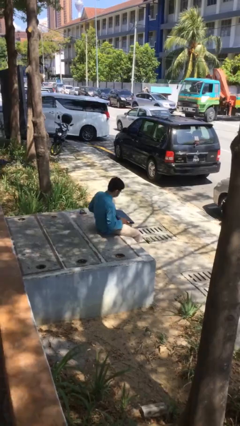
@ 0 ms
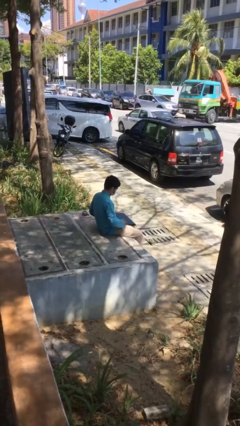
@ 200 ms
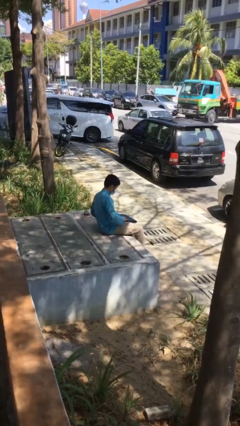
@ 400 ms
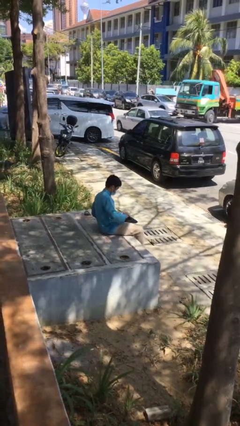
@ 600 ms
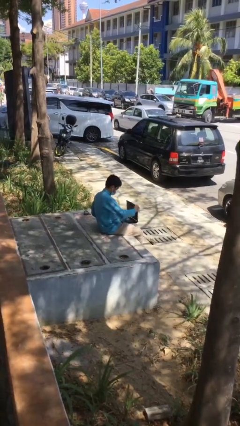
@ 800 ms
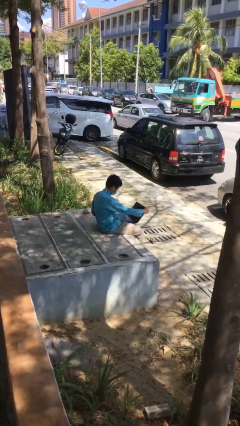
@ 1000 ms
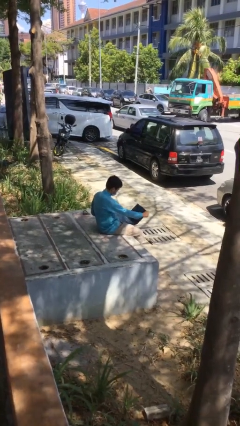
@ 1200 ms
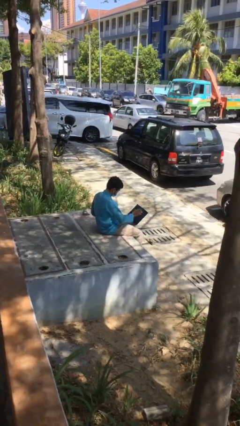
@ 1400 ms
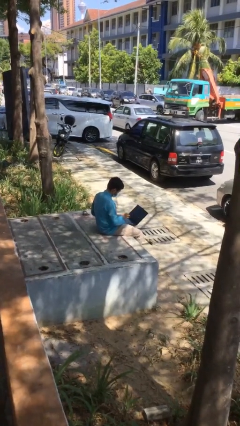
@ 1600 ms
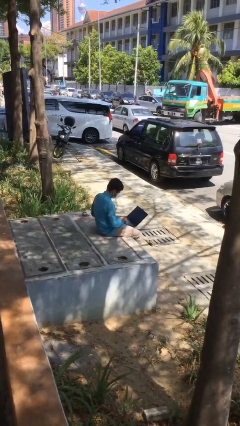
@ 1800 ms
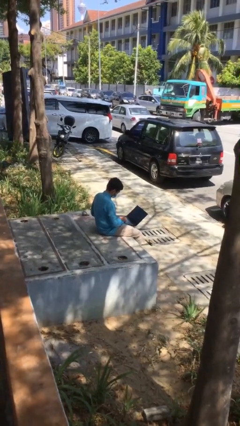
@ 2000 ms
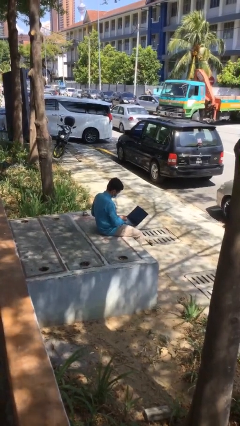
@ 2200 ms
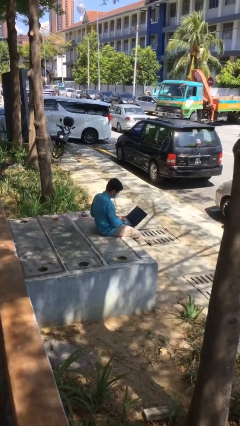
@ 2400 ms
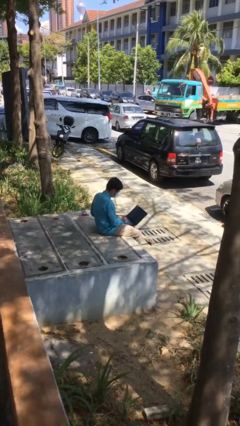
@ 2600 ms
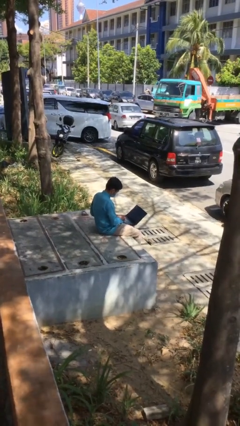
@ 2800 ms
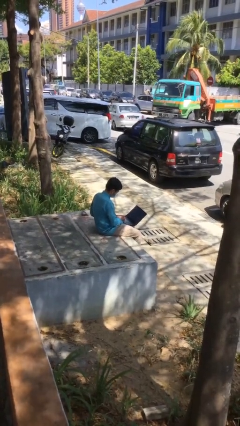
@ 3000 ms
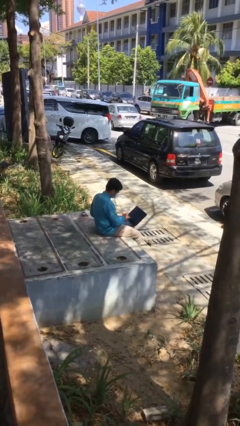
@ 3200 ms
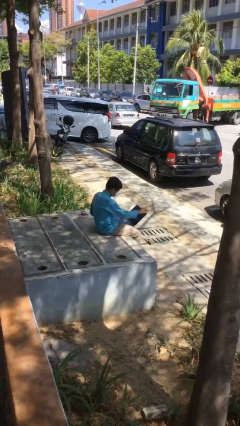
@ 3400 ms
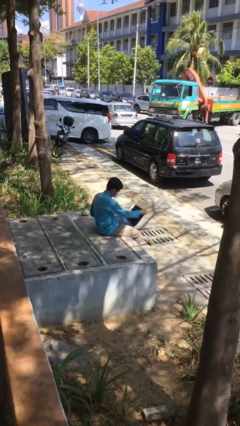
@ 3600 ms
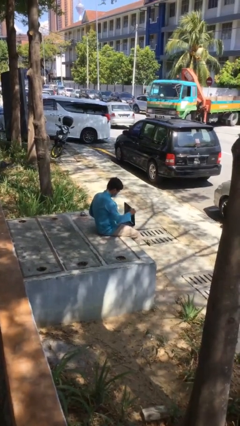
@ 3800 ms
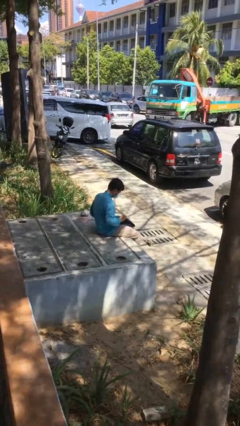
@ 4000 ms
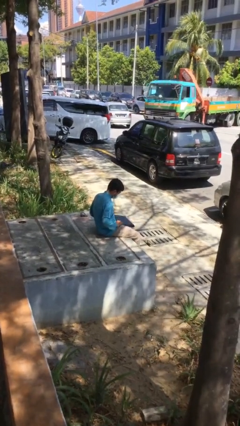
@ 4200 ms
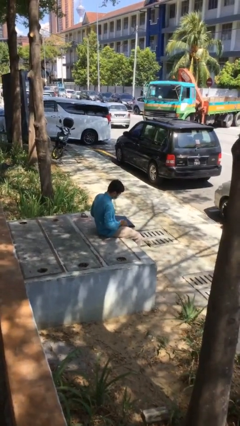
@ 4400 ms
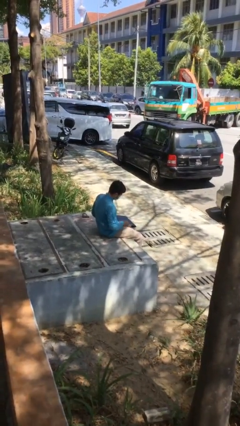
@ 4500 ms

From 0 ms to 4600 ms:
person interacts with laptop

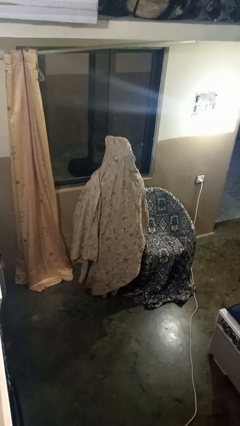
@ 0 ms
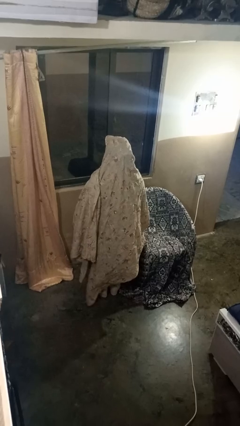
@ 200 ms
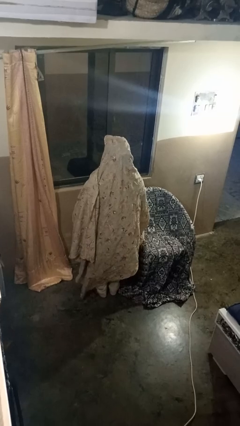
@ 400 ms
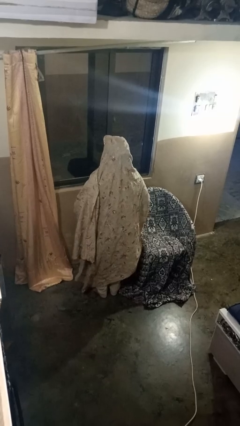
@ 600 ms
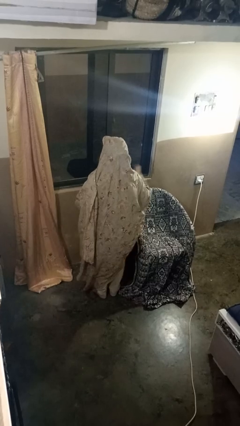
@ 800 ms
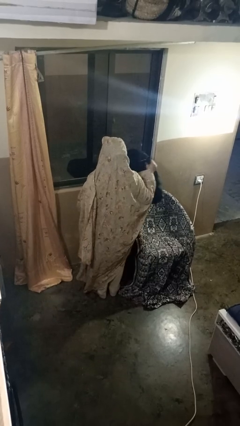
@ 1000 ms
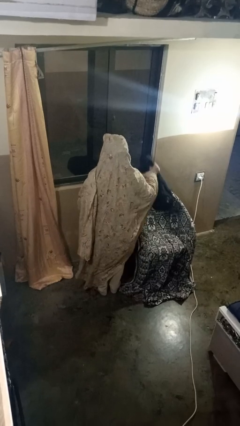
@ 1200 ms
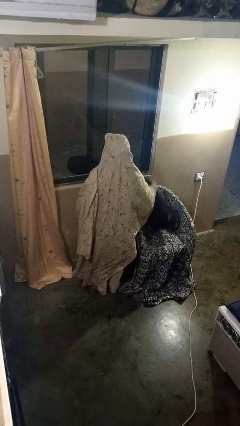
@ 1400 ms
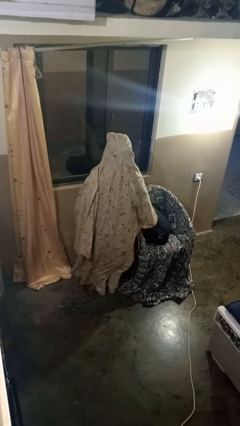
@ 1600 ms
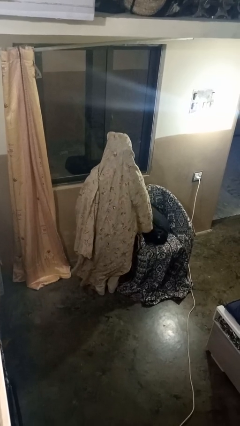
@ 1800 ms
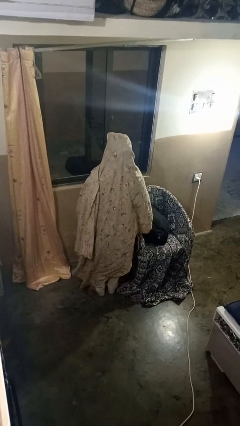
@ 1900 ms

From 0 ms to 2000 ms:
person puts down object on couch

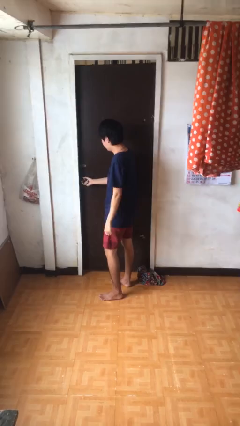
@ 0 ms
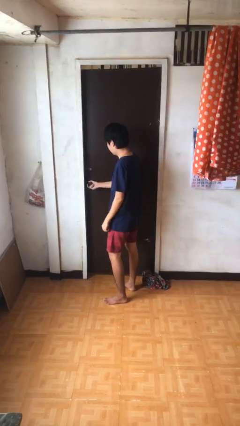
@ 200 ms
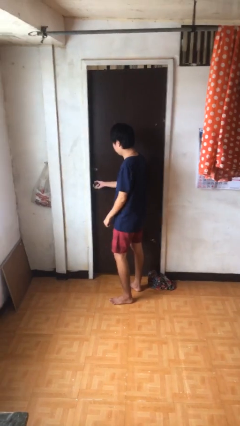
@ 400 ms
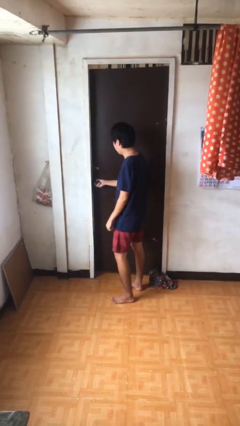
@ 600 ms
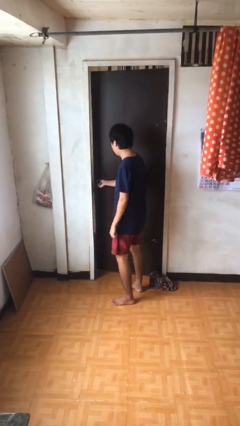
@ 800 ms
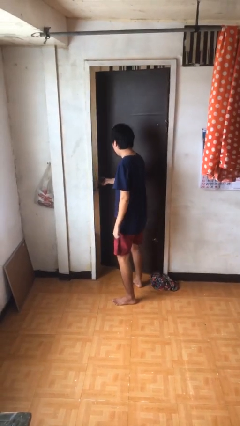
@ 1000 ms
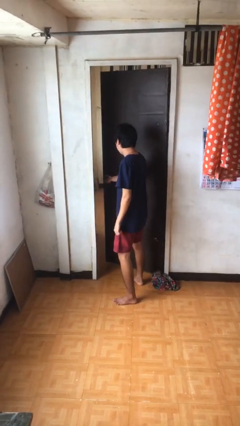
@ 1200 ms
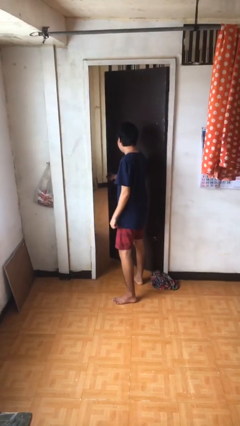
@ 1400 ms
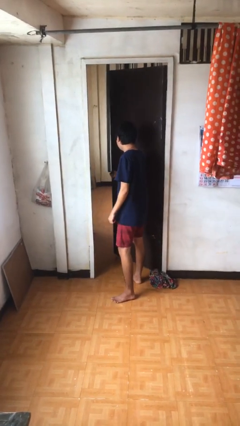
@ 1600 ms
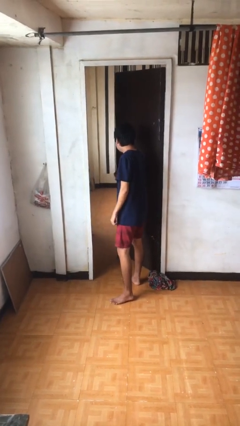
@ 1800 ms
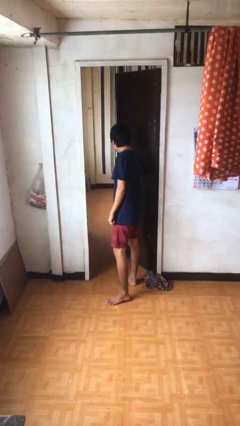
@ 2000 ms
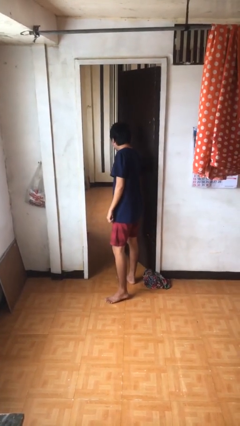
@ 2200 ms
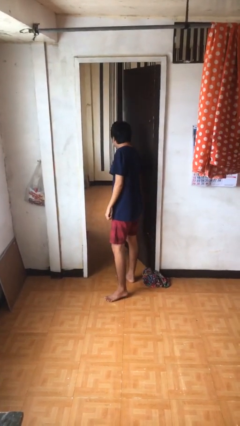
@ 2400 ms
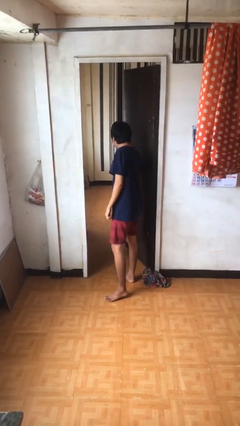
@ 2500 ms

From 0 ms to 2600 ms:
person opens facility door

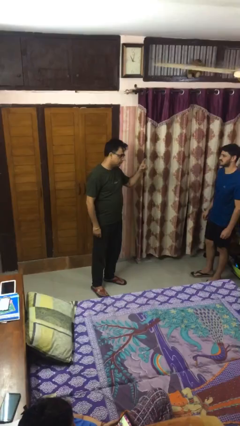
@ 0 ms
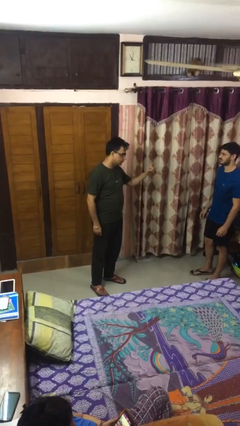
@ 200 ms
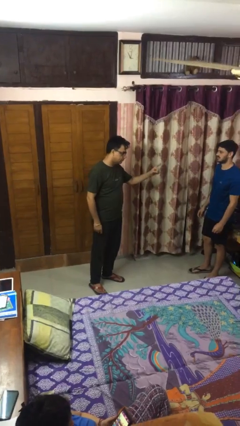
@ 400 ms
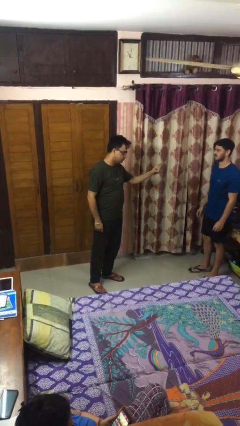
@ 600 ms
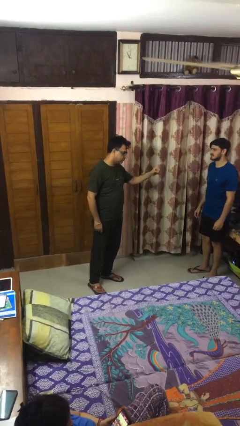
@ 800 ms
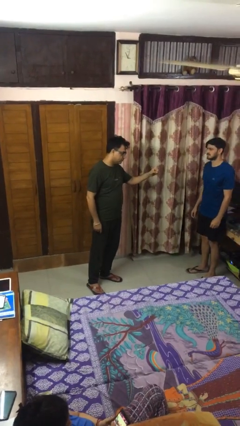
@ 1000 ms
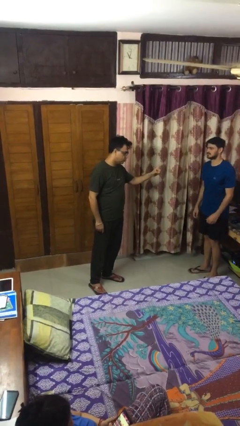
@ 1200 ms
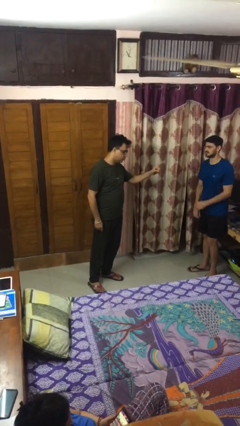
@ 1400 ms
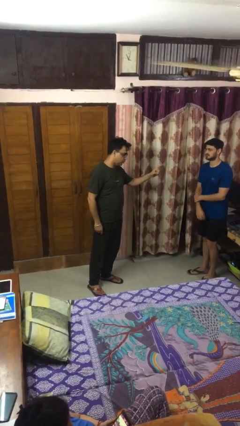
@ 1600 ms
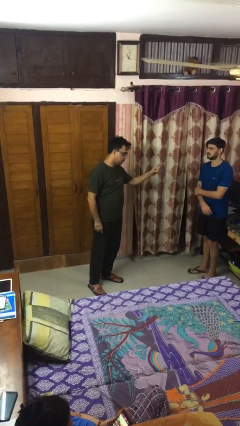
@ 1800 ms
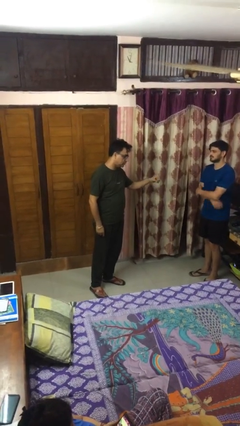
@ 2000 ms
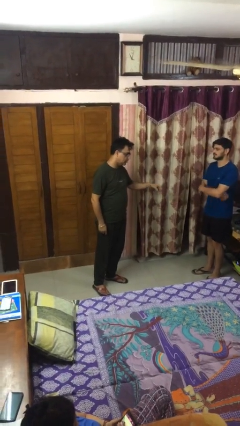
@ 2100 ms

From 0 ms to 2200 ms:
person points at person

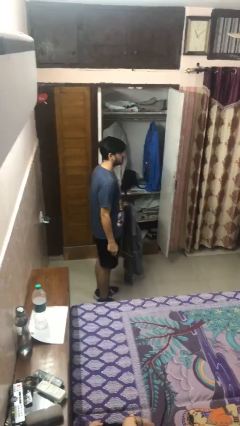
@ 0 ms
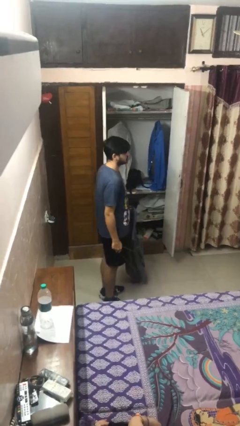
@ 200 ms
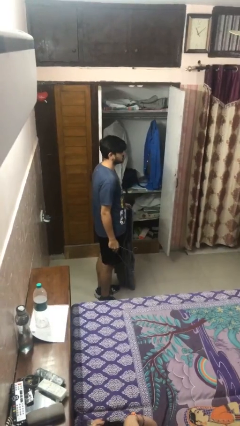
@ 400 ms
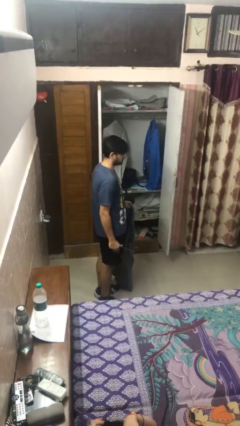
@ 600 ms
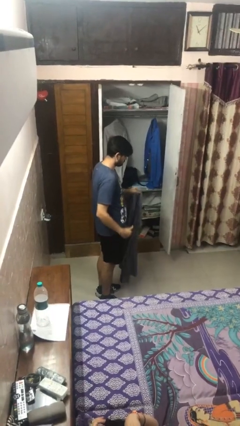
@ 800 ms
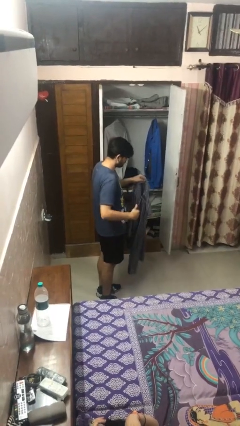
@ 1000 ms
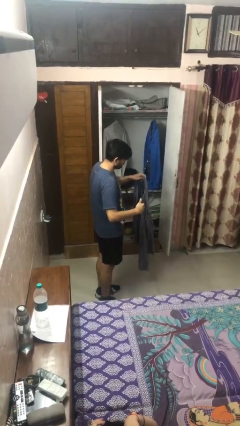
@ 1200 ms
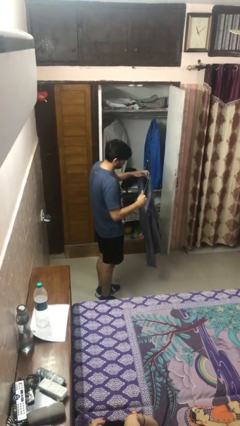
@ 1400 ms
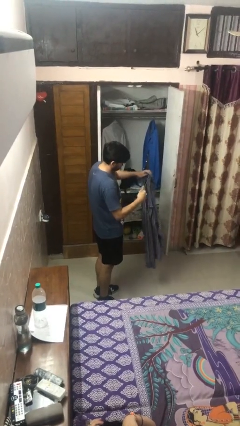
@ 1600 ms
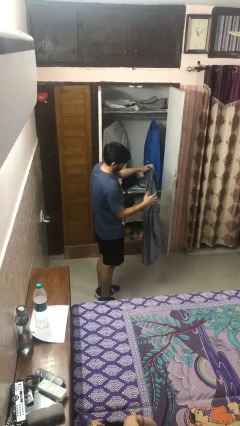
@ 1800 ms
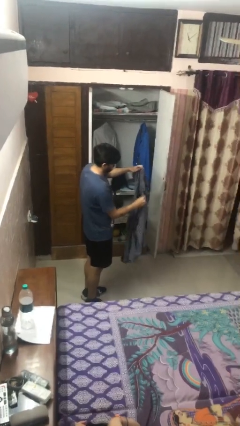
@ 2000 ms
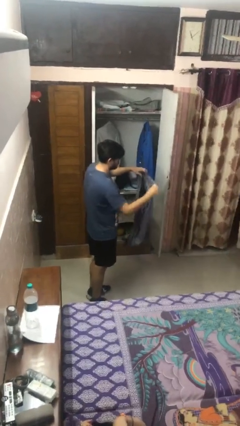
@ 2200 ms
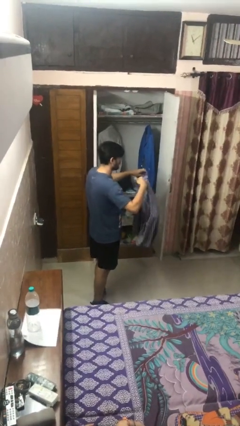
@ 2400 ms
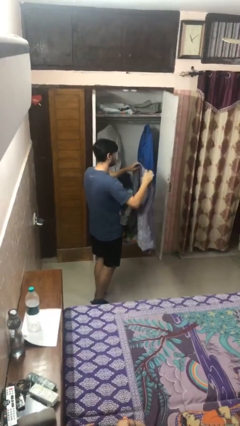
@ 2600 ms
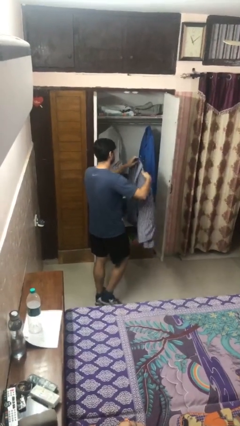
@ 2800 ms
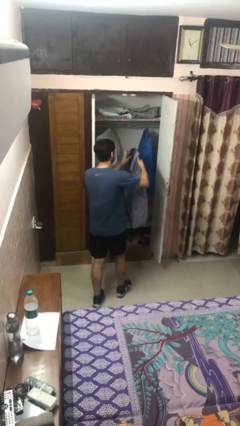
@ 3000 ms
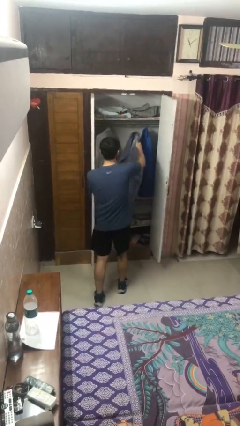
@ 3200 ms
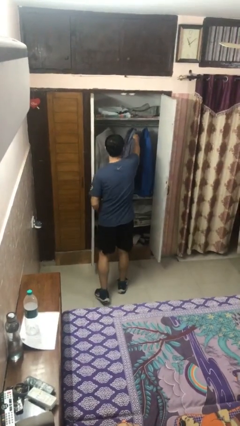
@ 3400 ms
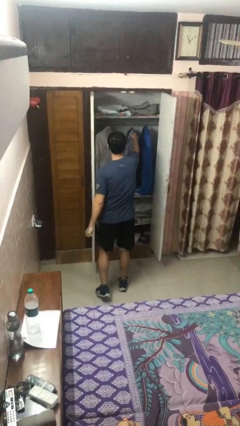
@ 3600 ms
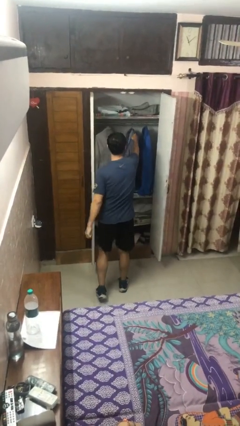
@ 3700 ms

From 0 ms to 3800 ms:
person puts clothes into closet

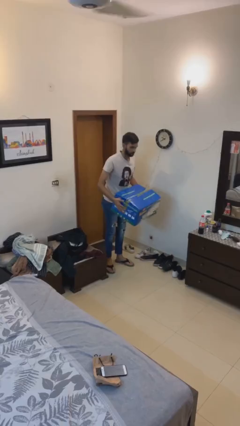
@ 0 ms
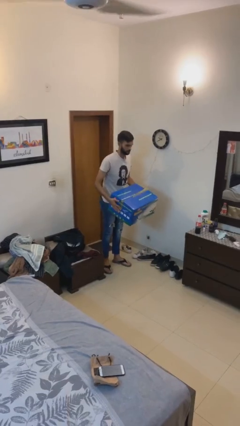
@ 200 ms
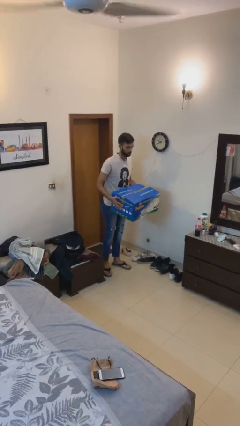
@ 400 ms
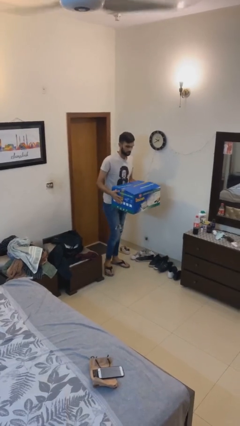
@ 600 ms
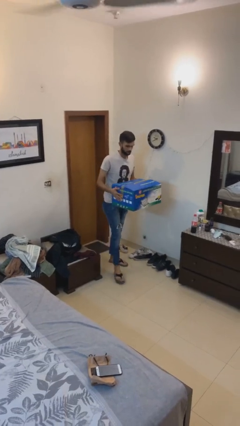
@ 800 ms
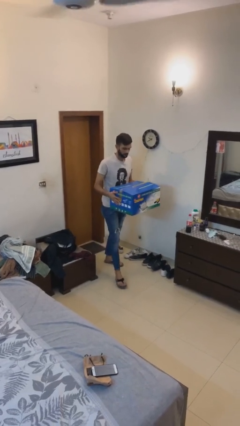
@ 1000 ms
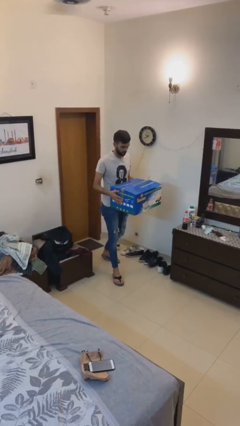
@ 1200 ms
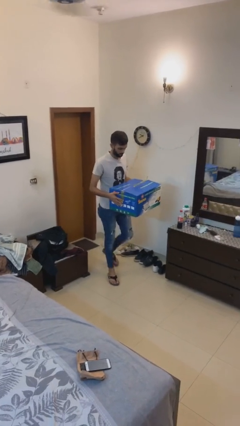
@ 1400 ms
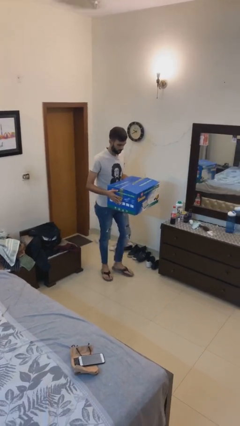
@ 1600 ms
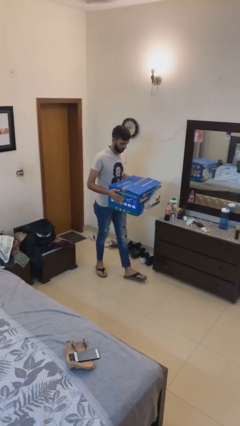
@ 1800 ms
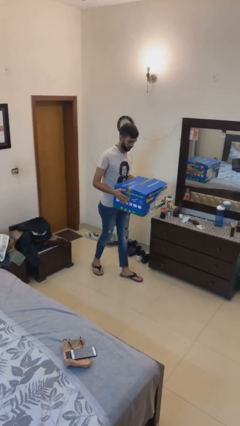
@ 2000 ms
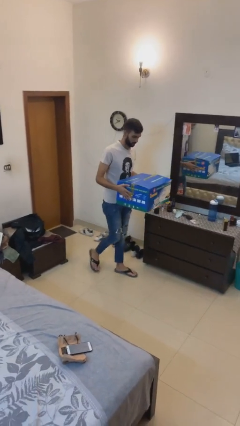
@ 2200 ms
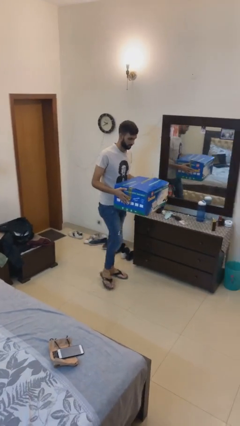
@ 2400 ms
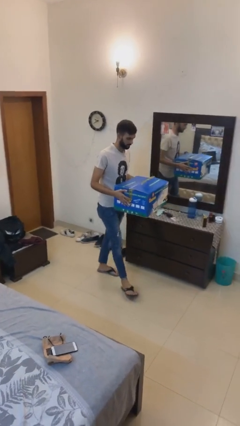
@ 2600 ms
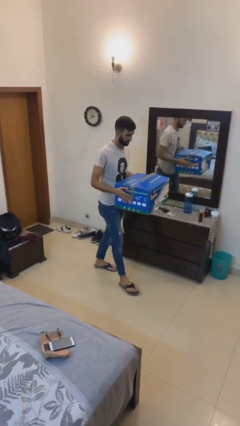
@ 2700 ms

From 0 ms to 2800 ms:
person carries heavy object
